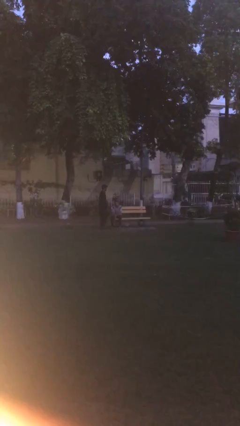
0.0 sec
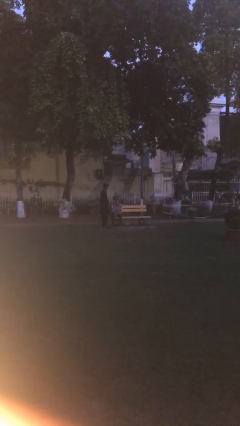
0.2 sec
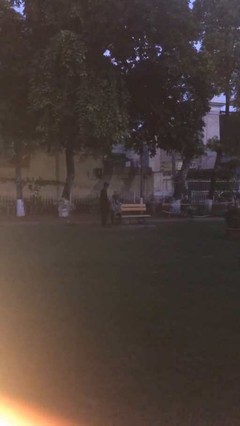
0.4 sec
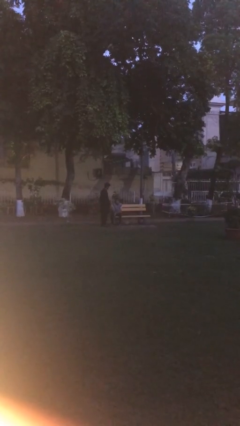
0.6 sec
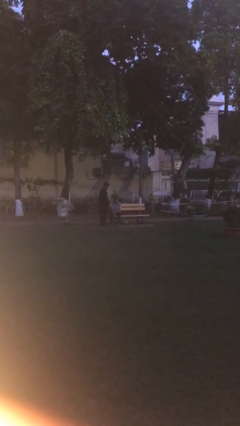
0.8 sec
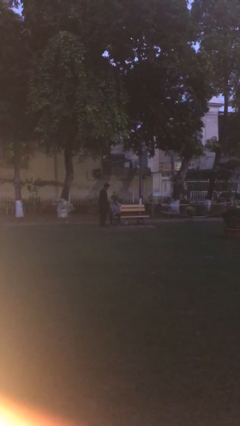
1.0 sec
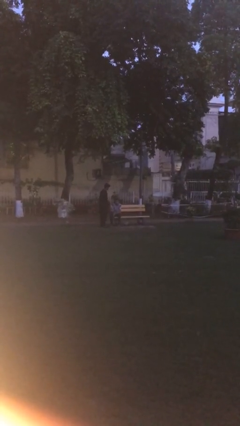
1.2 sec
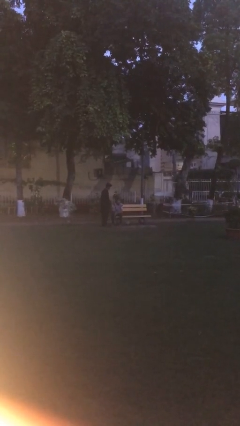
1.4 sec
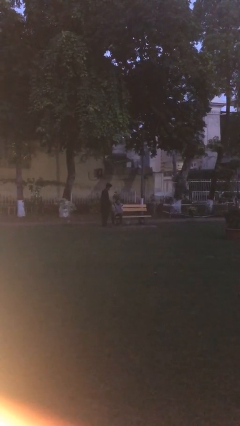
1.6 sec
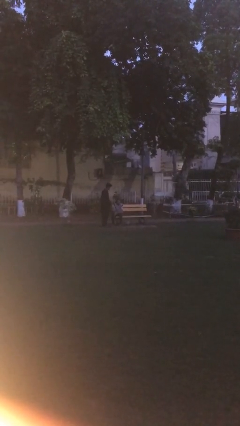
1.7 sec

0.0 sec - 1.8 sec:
person shakes hand

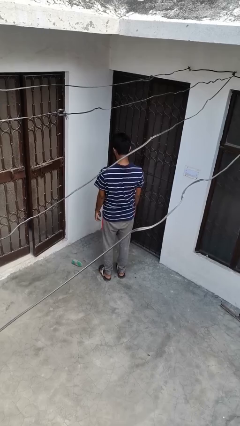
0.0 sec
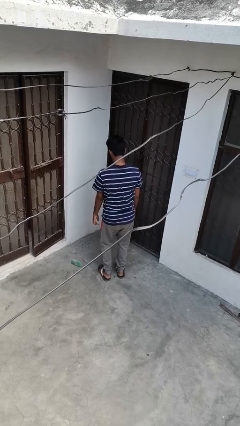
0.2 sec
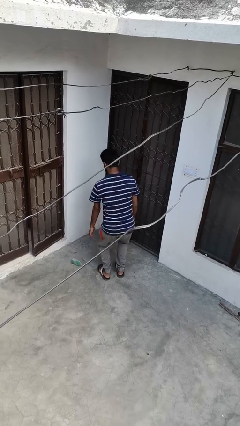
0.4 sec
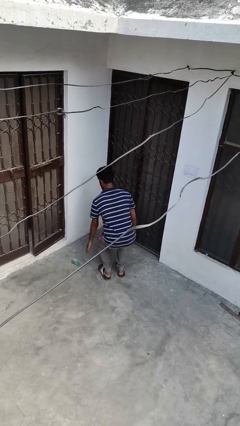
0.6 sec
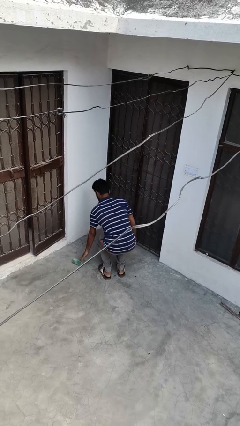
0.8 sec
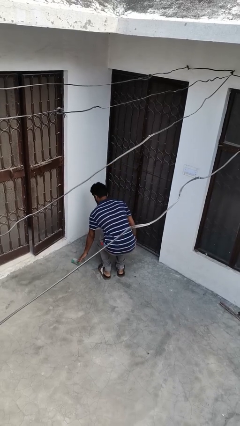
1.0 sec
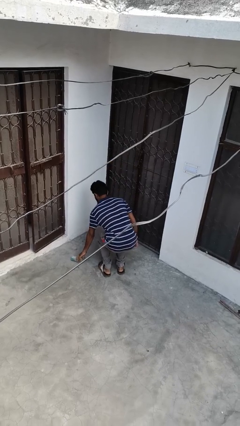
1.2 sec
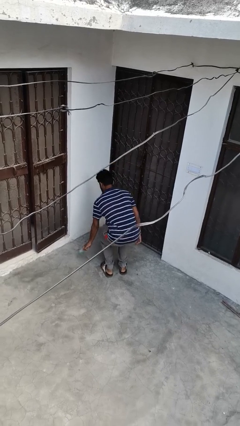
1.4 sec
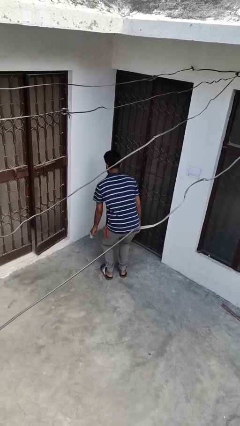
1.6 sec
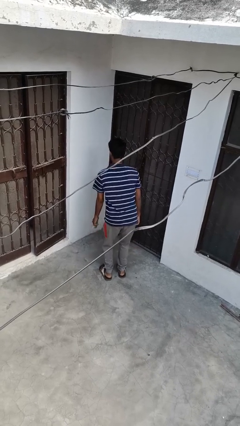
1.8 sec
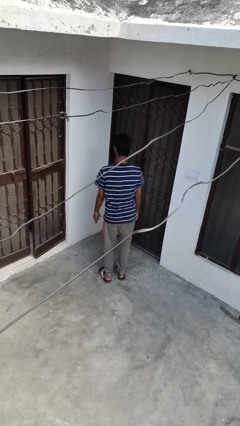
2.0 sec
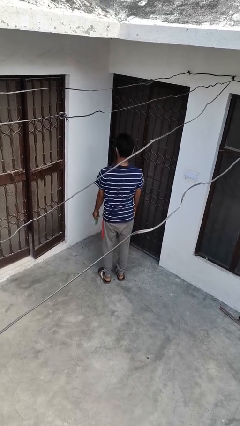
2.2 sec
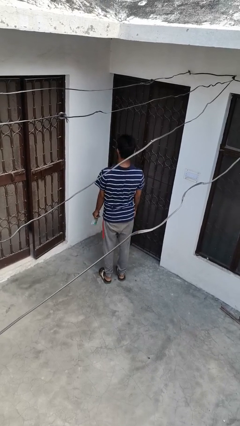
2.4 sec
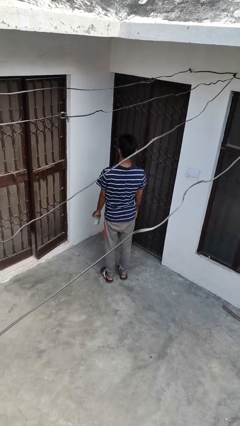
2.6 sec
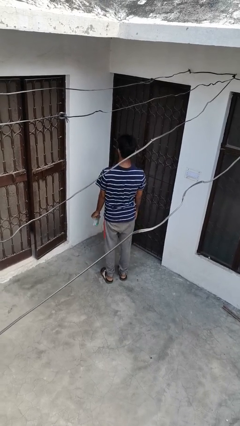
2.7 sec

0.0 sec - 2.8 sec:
person picks up object from floor

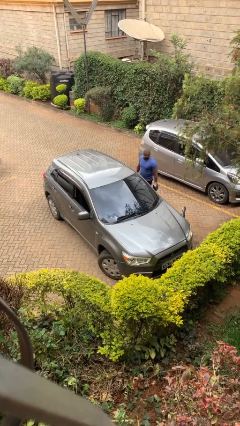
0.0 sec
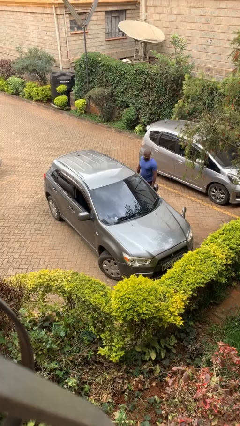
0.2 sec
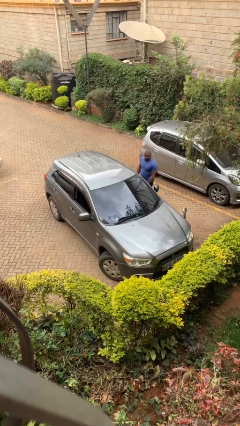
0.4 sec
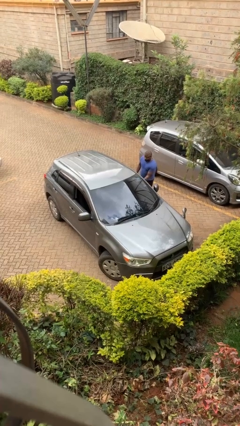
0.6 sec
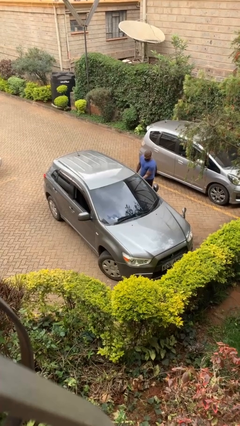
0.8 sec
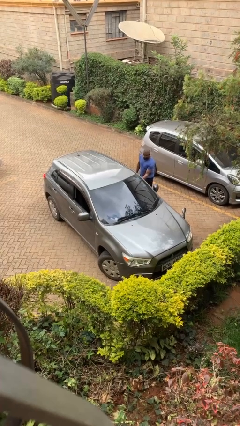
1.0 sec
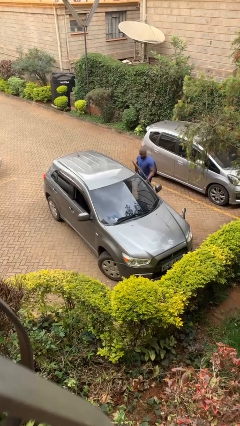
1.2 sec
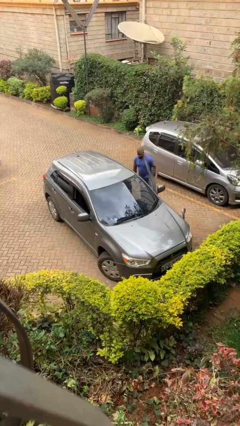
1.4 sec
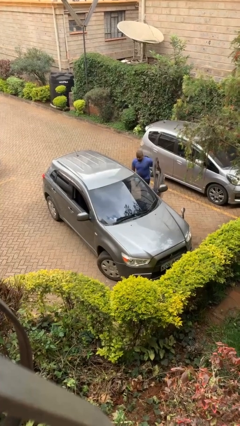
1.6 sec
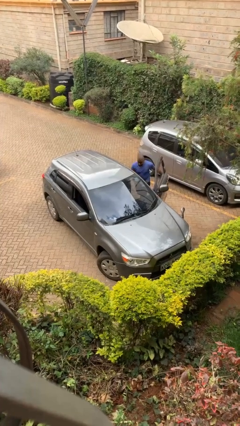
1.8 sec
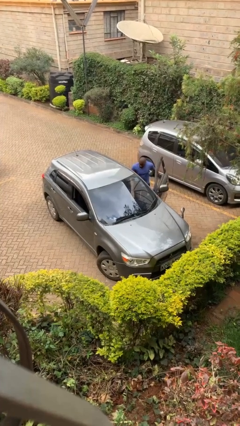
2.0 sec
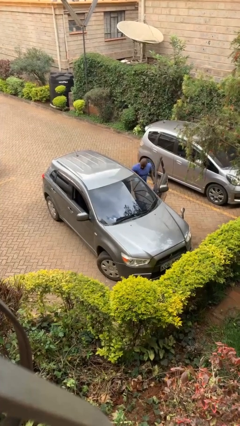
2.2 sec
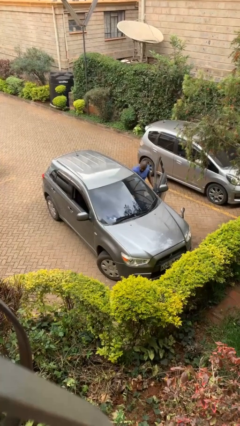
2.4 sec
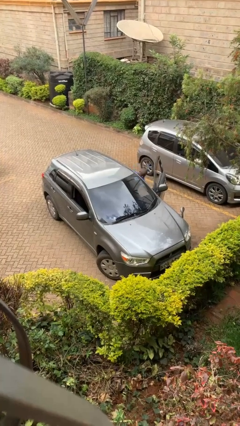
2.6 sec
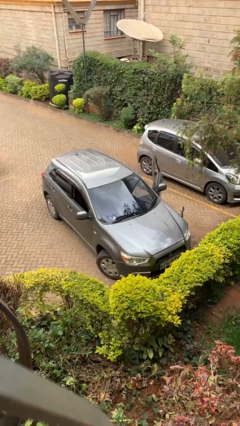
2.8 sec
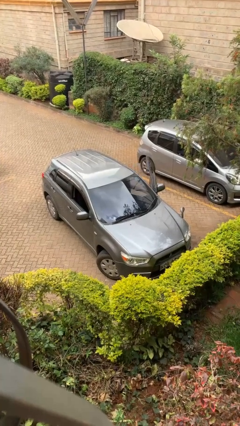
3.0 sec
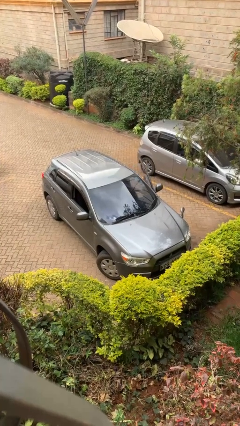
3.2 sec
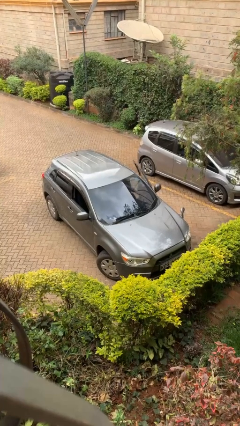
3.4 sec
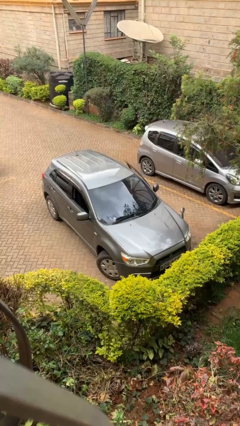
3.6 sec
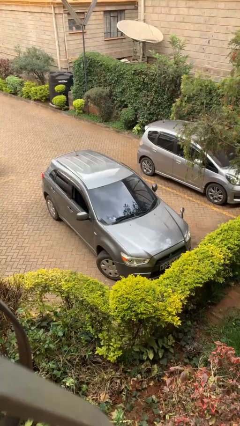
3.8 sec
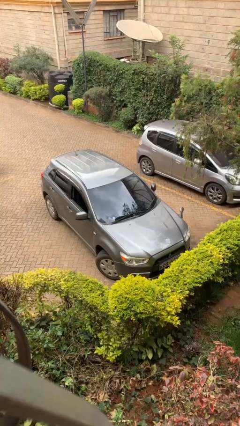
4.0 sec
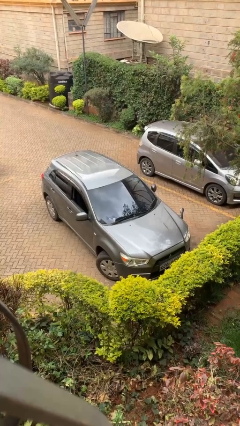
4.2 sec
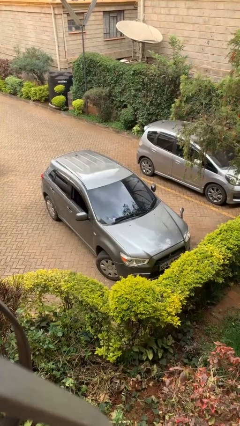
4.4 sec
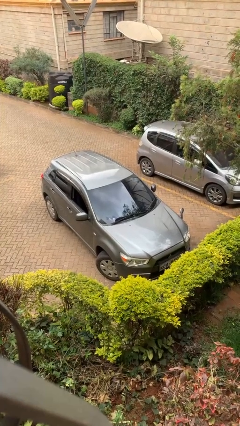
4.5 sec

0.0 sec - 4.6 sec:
car picks up person

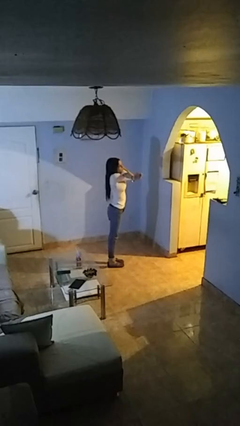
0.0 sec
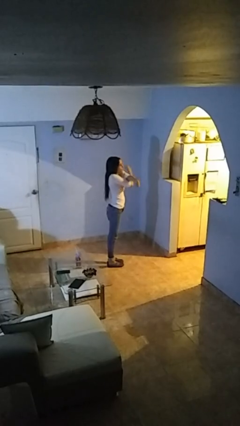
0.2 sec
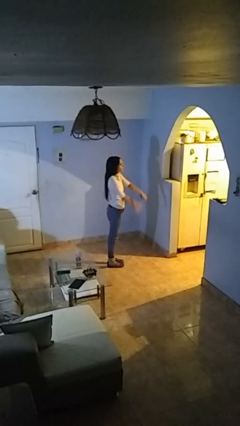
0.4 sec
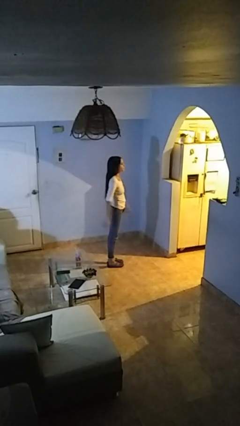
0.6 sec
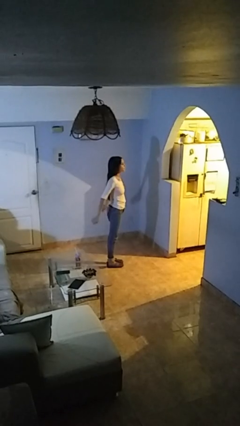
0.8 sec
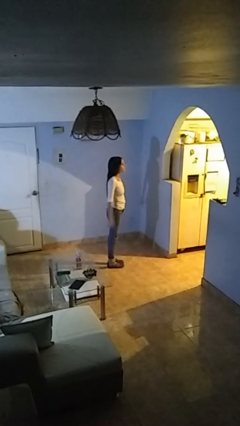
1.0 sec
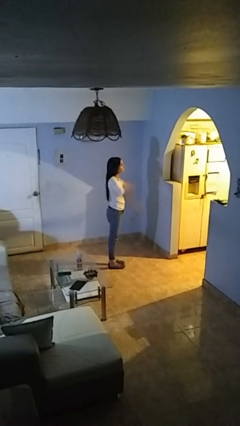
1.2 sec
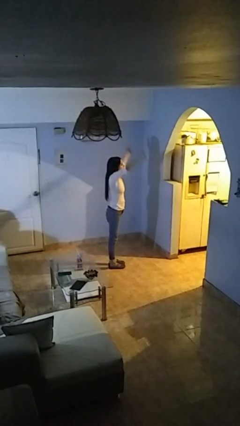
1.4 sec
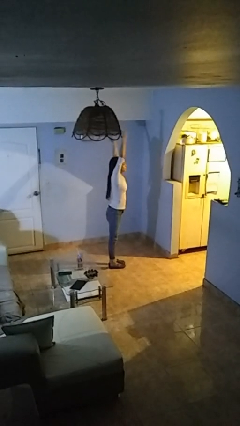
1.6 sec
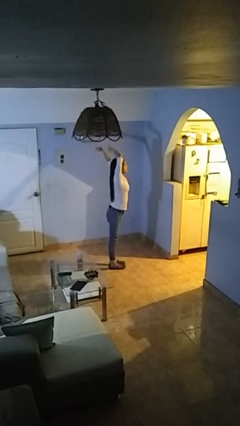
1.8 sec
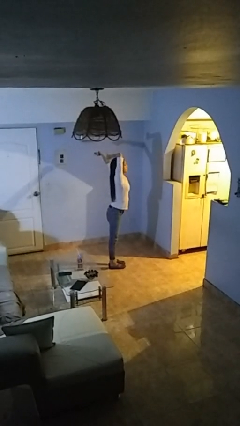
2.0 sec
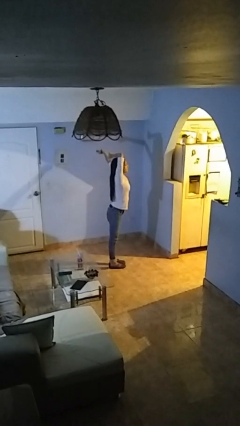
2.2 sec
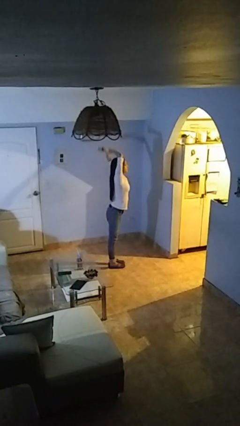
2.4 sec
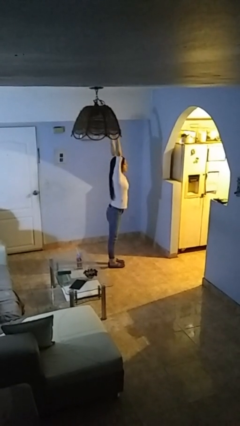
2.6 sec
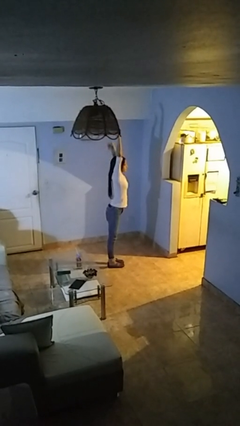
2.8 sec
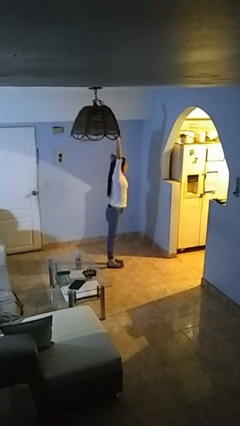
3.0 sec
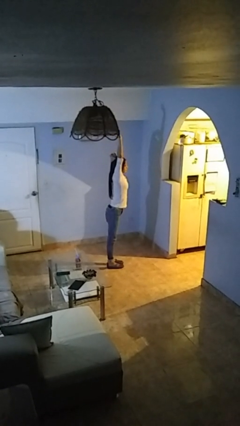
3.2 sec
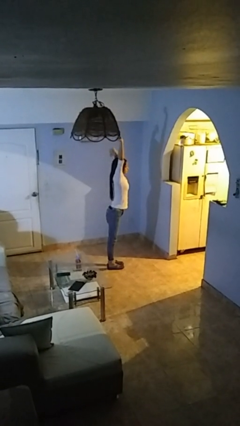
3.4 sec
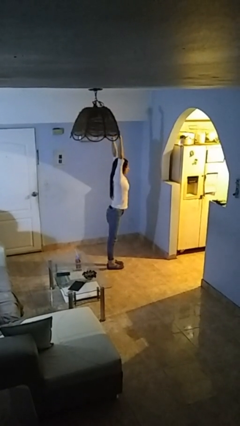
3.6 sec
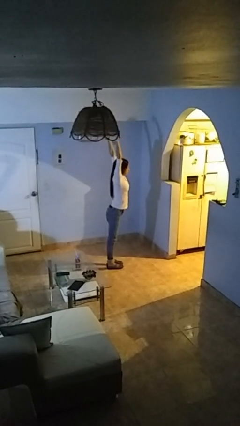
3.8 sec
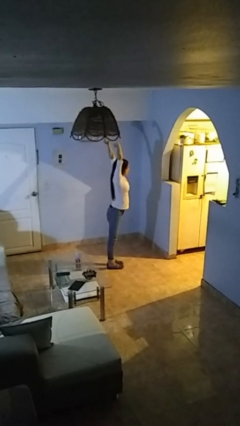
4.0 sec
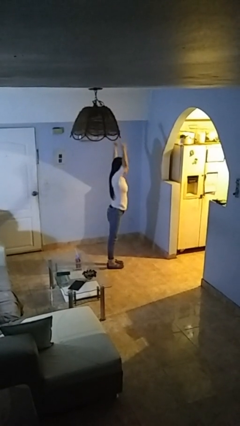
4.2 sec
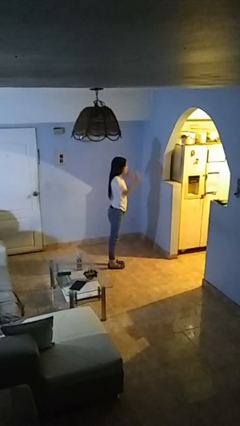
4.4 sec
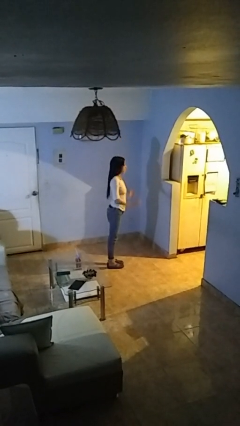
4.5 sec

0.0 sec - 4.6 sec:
person stretches arms over head

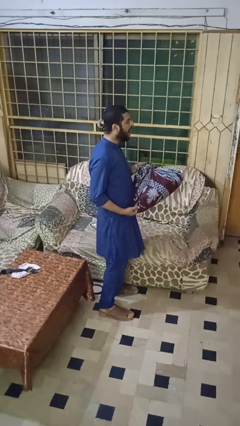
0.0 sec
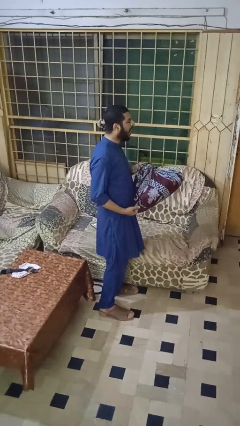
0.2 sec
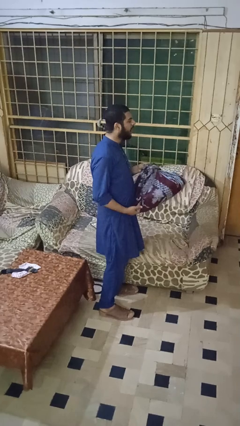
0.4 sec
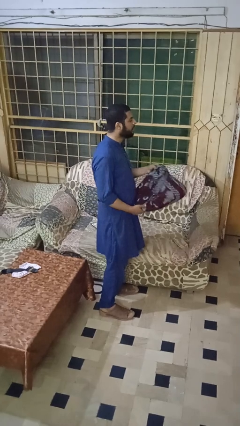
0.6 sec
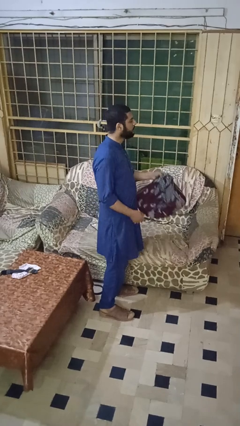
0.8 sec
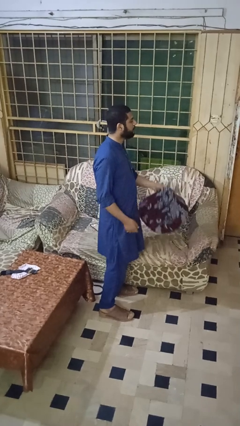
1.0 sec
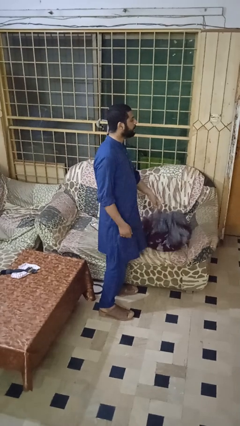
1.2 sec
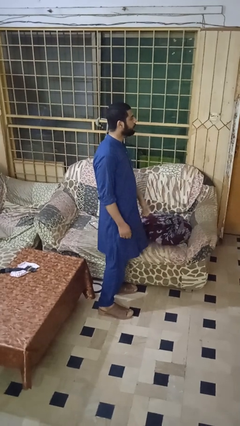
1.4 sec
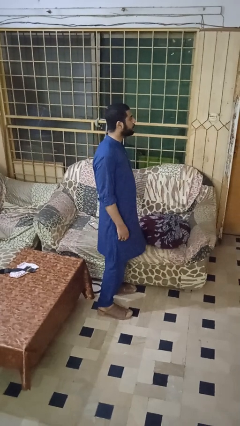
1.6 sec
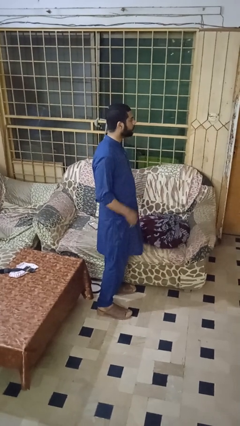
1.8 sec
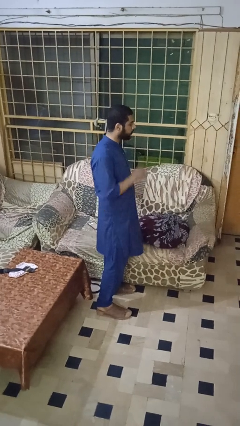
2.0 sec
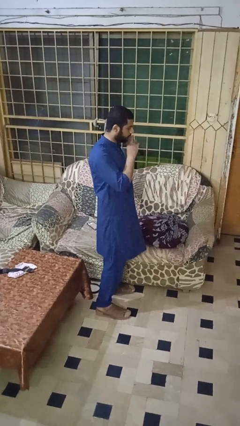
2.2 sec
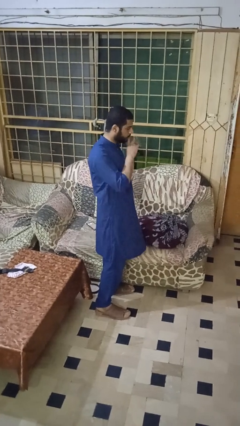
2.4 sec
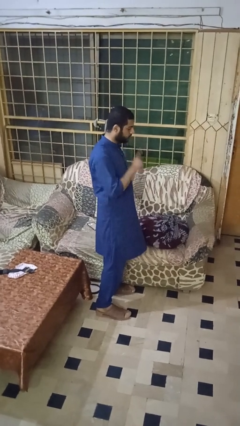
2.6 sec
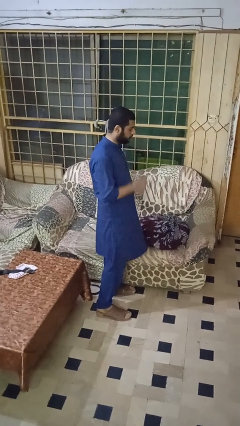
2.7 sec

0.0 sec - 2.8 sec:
person puts down object on couch

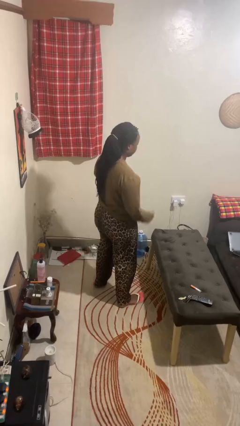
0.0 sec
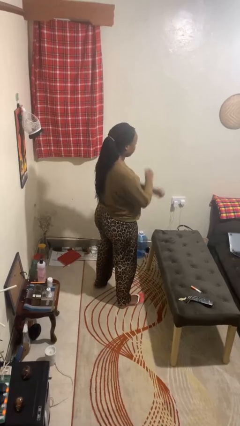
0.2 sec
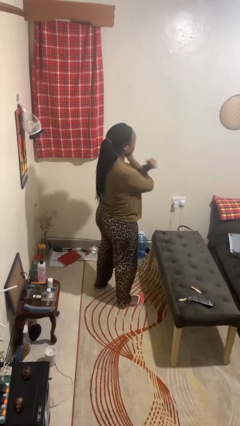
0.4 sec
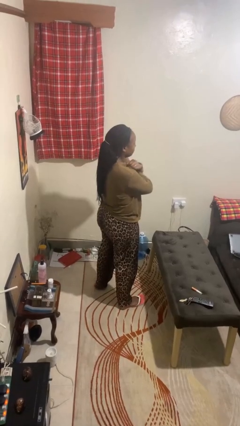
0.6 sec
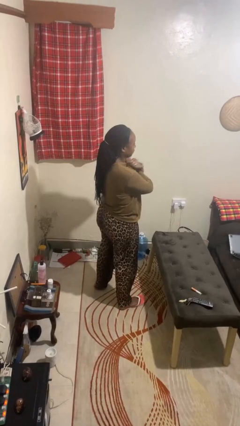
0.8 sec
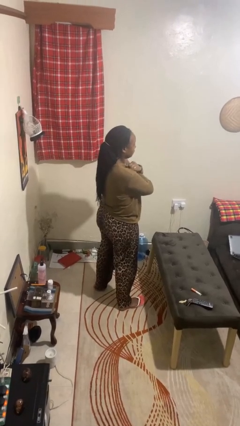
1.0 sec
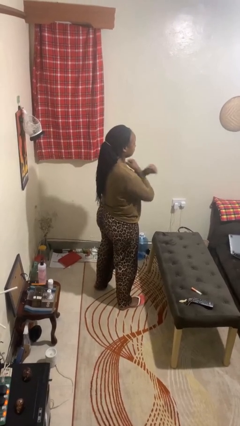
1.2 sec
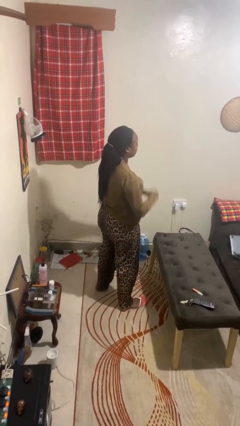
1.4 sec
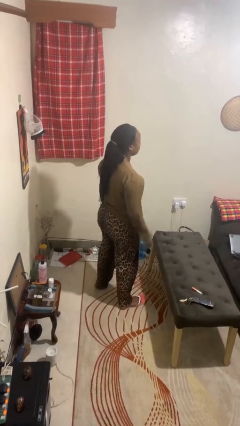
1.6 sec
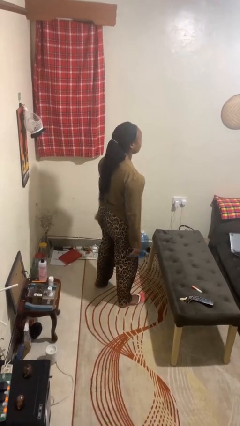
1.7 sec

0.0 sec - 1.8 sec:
person gestures arms x
